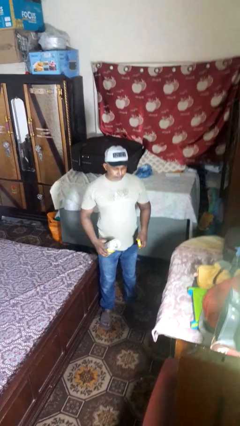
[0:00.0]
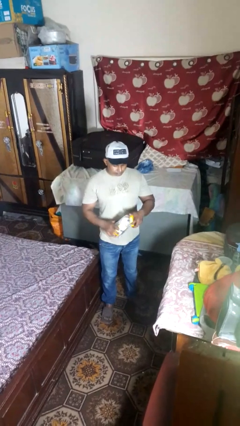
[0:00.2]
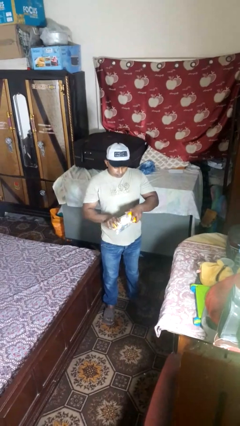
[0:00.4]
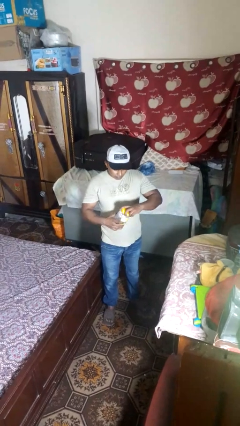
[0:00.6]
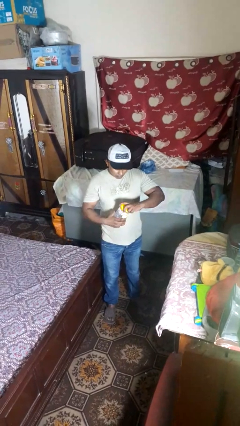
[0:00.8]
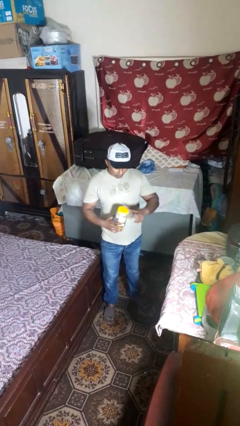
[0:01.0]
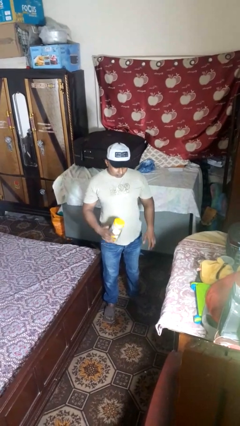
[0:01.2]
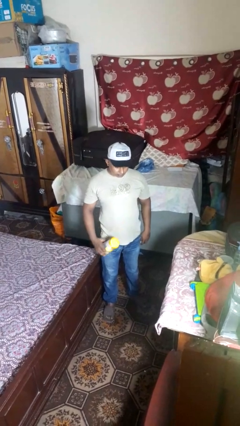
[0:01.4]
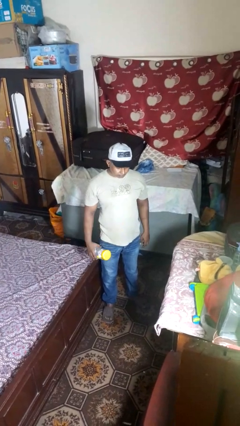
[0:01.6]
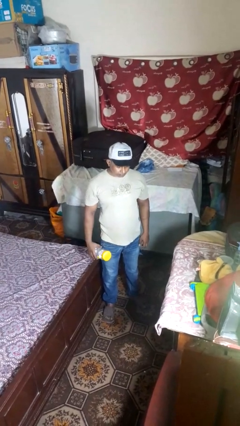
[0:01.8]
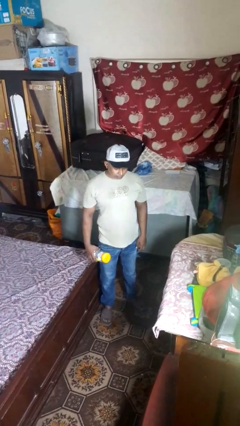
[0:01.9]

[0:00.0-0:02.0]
person closes jar

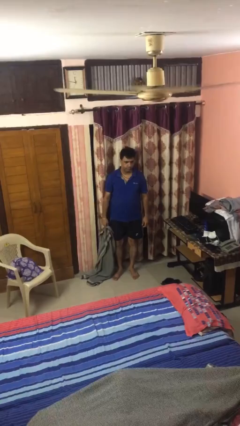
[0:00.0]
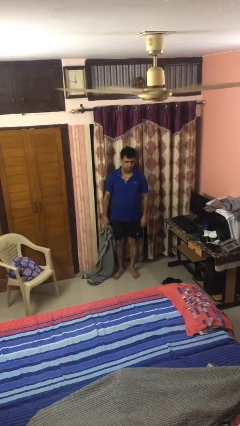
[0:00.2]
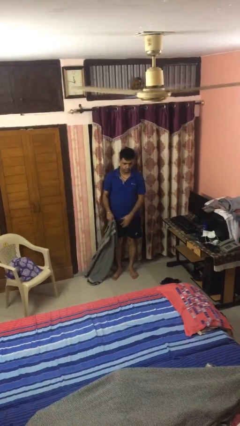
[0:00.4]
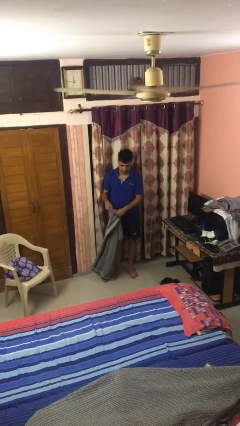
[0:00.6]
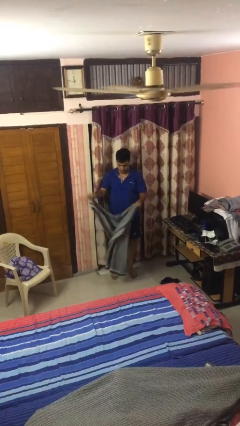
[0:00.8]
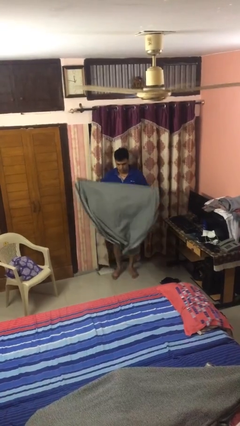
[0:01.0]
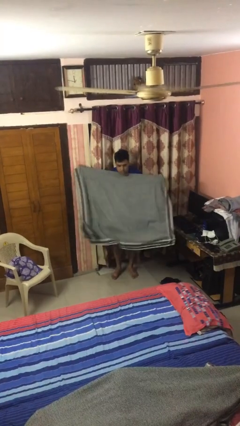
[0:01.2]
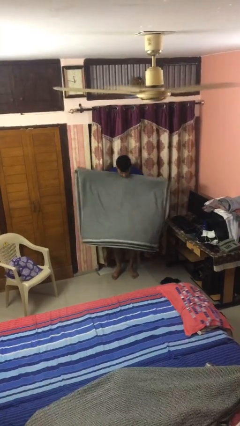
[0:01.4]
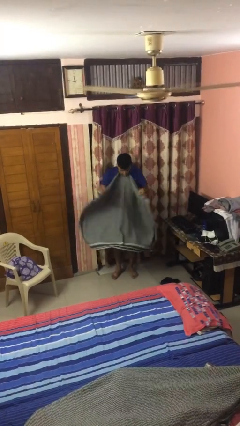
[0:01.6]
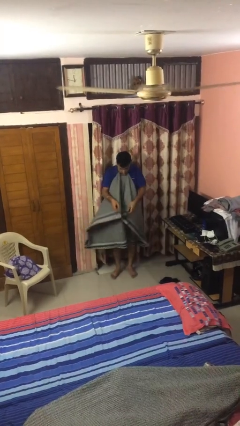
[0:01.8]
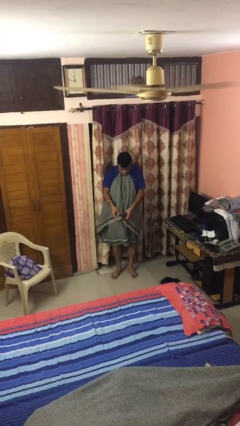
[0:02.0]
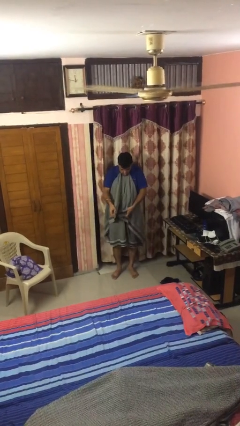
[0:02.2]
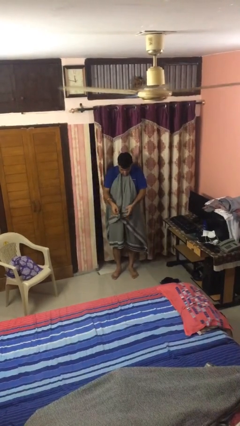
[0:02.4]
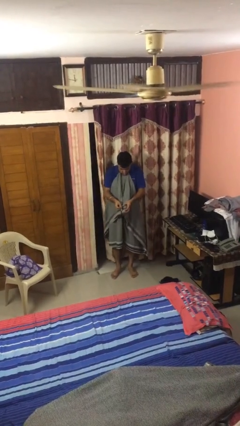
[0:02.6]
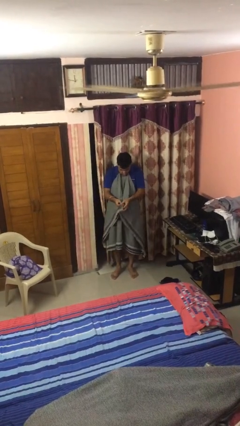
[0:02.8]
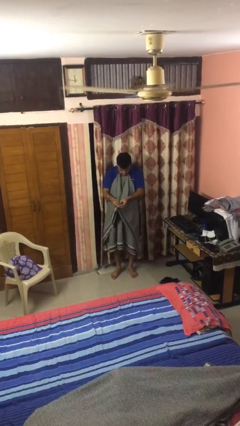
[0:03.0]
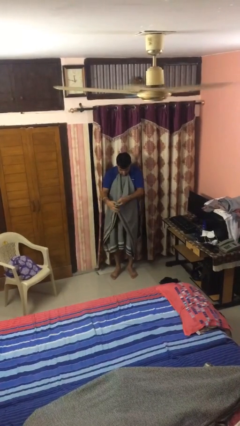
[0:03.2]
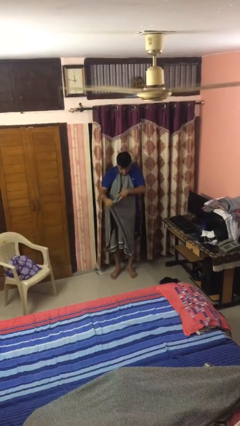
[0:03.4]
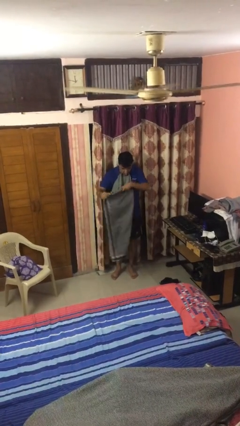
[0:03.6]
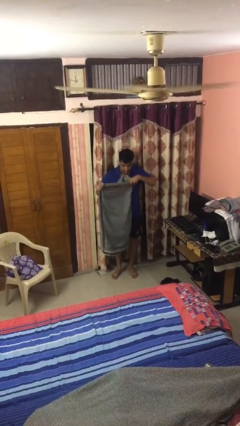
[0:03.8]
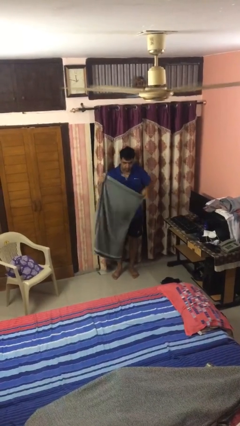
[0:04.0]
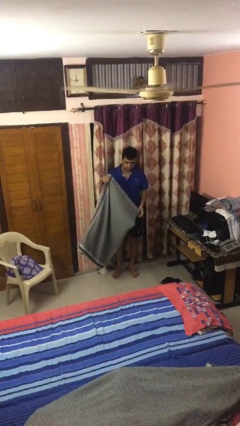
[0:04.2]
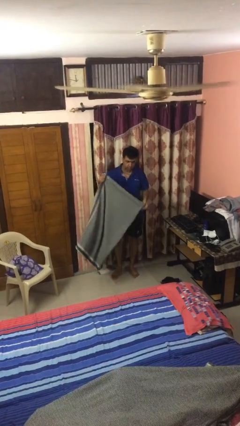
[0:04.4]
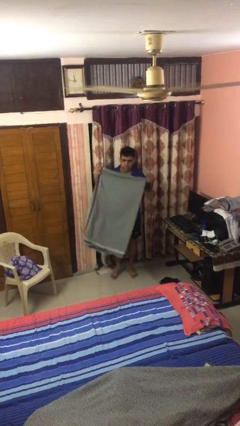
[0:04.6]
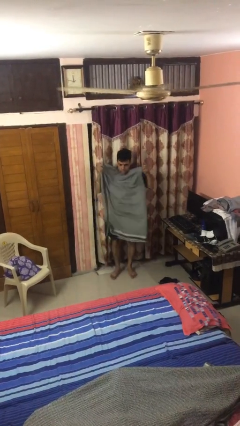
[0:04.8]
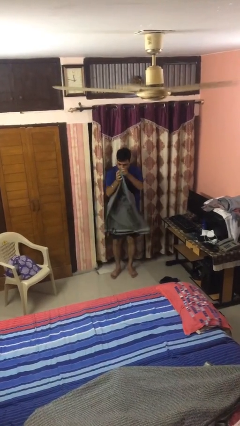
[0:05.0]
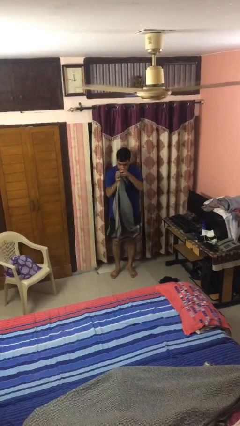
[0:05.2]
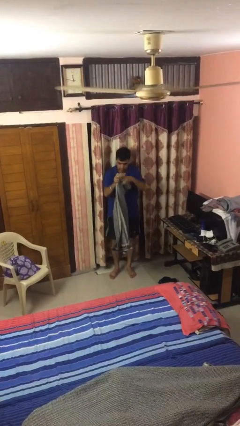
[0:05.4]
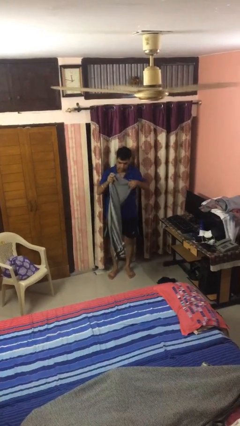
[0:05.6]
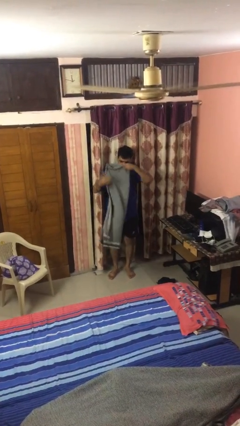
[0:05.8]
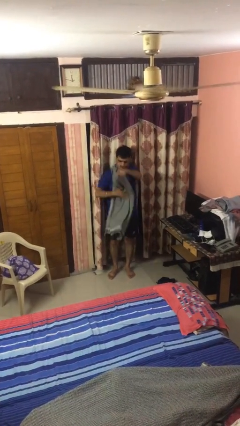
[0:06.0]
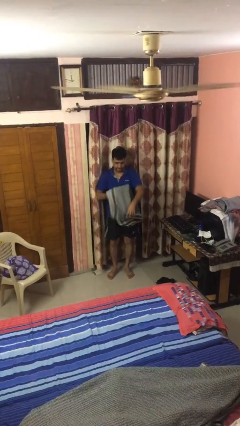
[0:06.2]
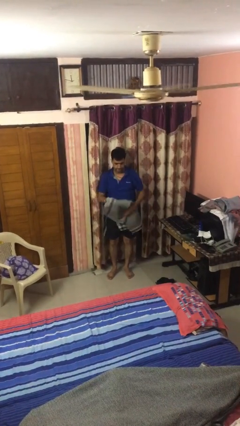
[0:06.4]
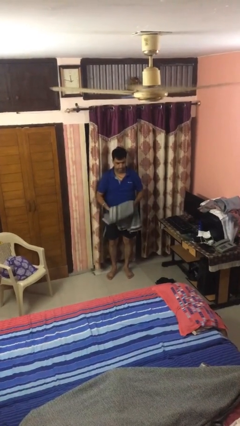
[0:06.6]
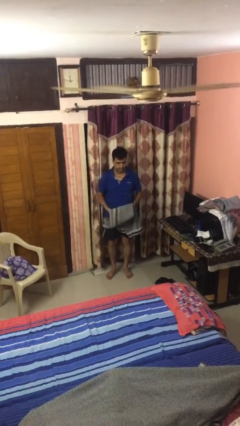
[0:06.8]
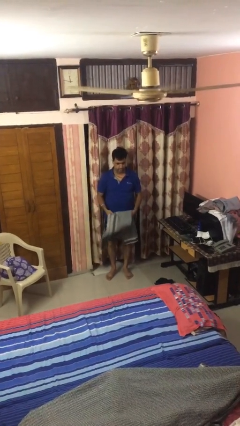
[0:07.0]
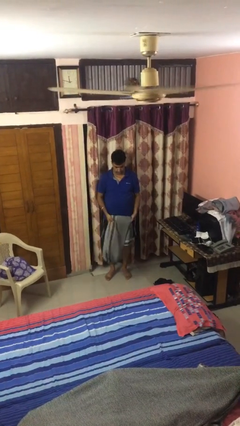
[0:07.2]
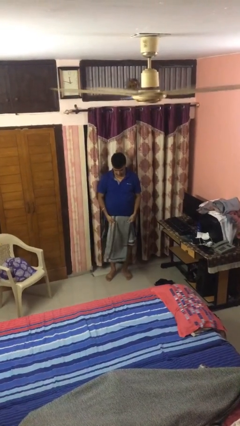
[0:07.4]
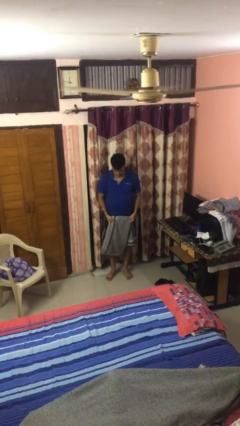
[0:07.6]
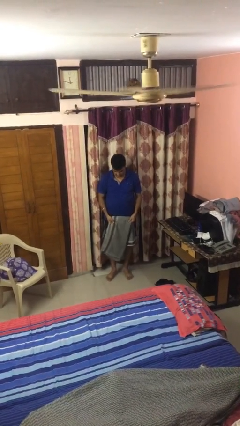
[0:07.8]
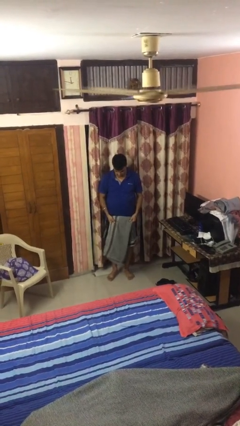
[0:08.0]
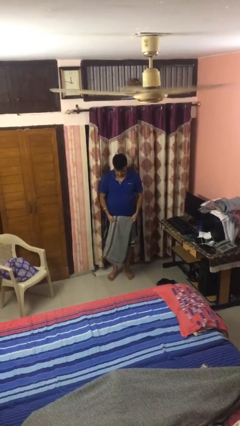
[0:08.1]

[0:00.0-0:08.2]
person folds blanket

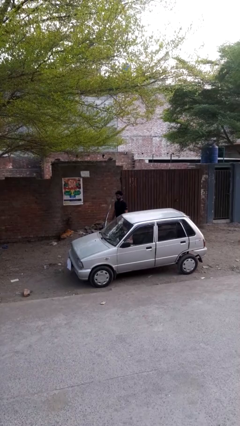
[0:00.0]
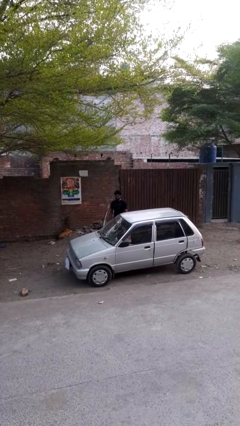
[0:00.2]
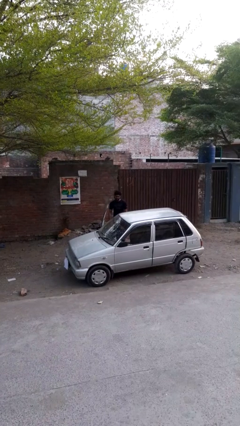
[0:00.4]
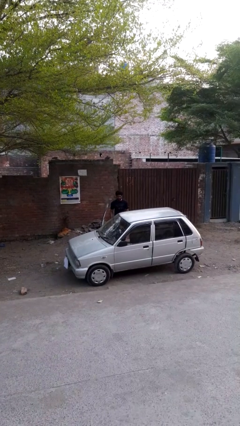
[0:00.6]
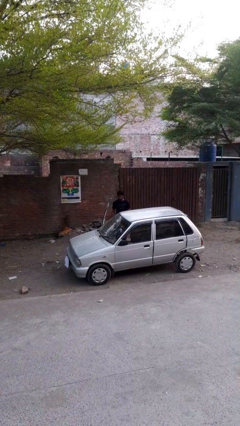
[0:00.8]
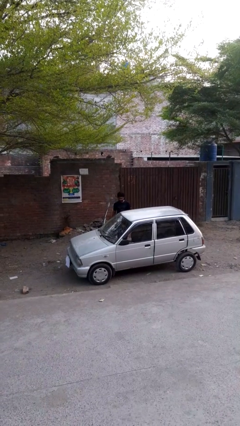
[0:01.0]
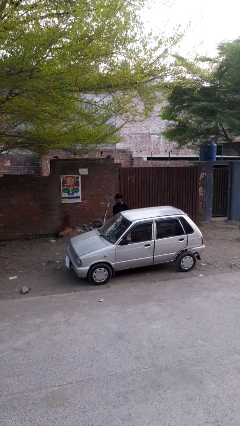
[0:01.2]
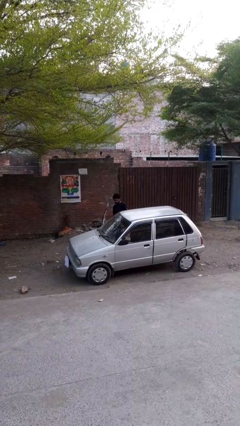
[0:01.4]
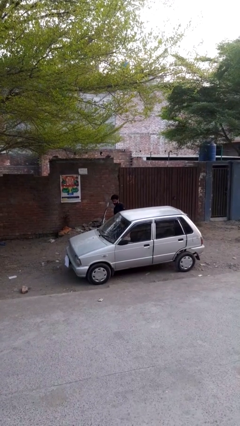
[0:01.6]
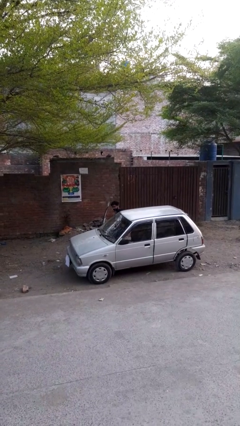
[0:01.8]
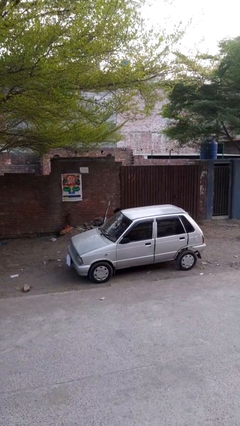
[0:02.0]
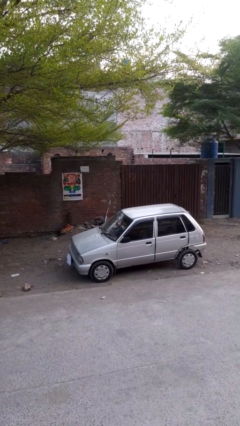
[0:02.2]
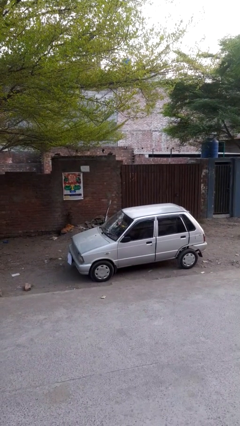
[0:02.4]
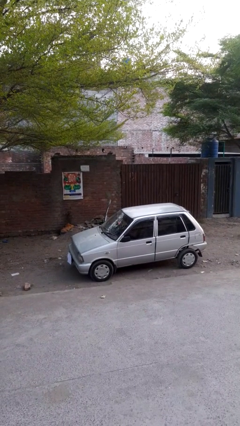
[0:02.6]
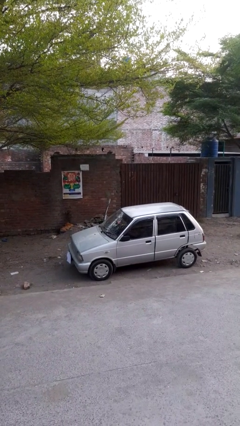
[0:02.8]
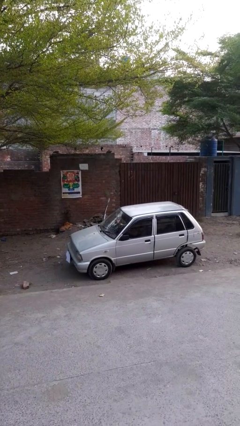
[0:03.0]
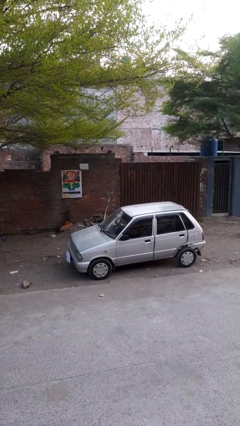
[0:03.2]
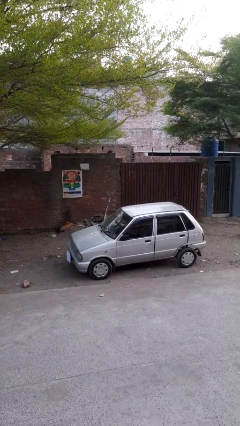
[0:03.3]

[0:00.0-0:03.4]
person enters car

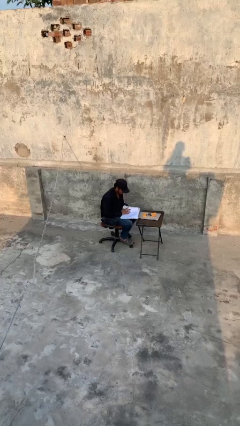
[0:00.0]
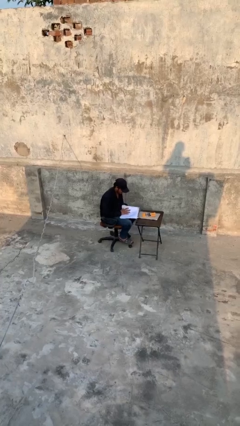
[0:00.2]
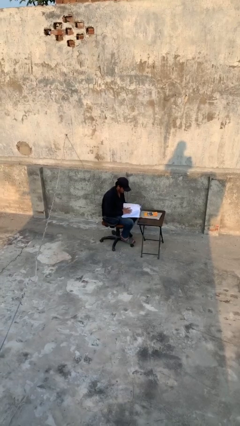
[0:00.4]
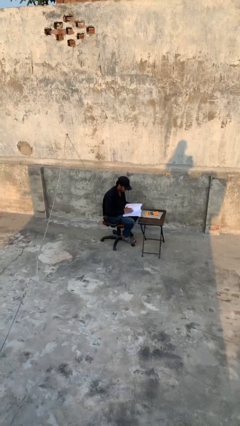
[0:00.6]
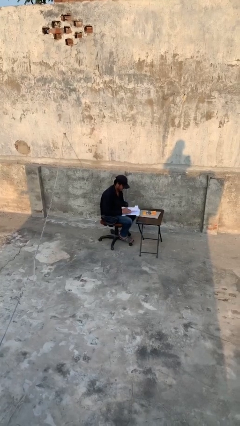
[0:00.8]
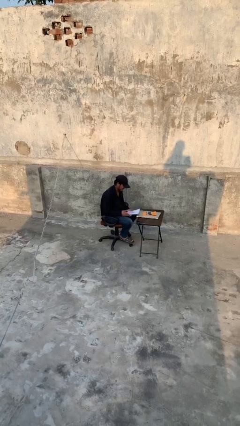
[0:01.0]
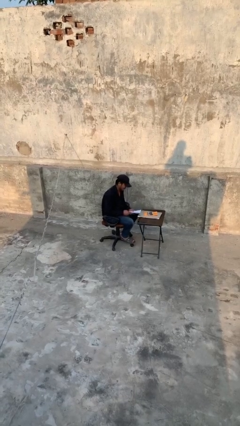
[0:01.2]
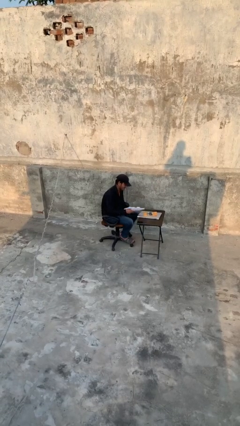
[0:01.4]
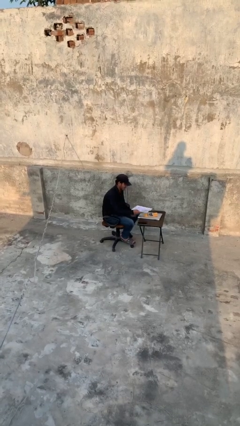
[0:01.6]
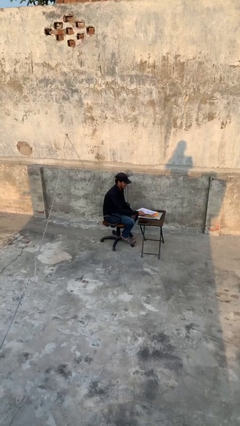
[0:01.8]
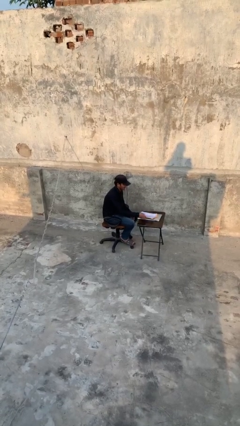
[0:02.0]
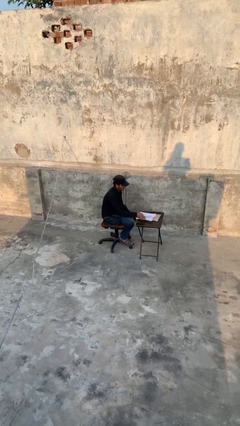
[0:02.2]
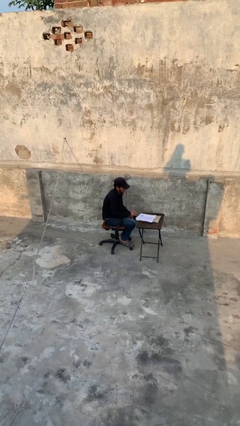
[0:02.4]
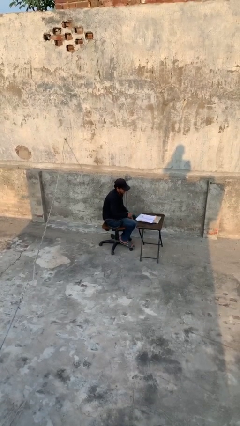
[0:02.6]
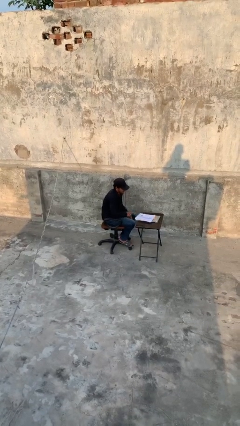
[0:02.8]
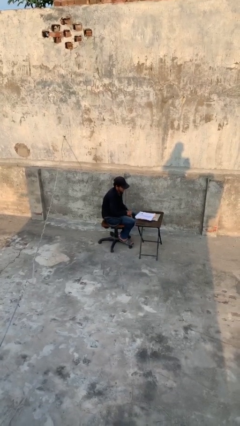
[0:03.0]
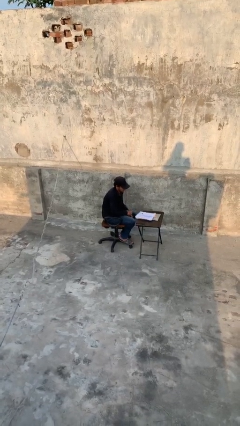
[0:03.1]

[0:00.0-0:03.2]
person puts down object on table

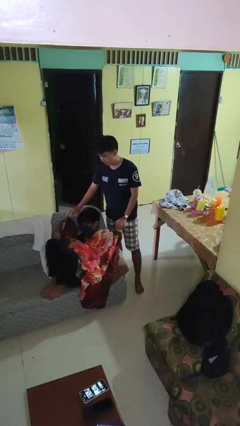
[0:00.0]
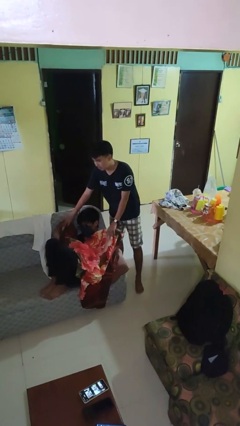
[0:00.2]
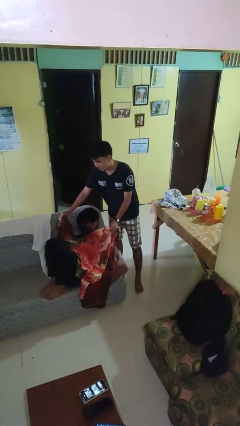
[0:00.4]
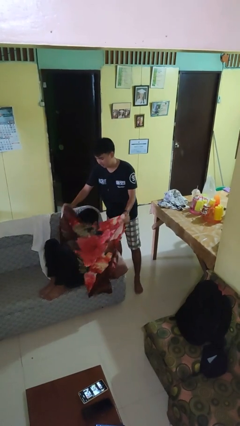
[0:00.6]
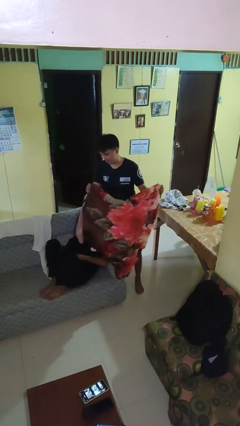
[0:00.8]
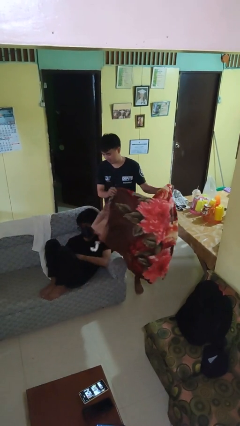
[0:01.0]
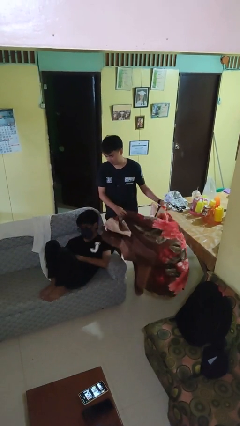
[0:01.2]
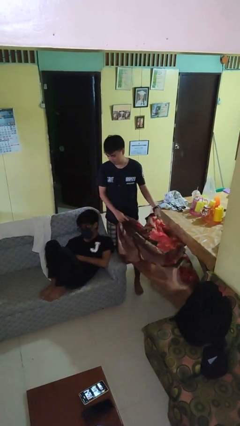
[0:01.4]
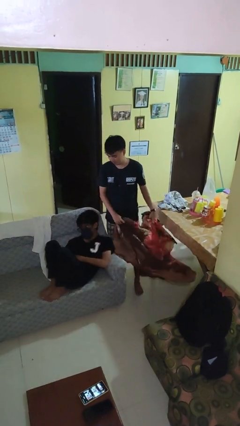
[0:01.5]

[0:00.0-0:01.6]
person uncovers friend with blanket
